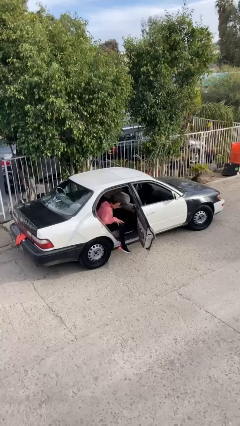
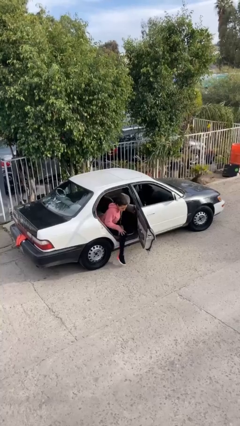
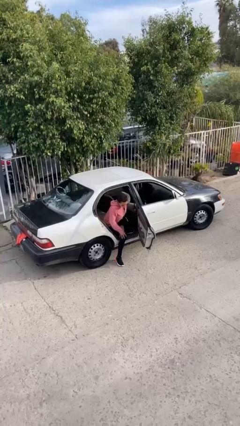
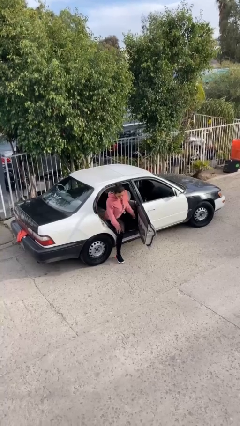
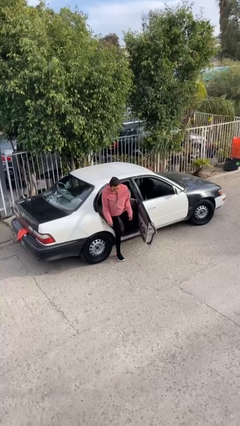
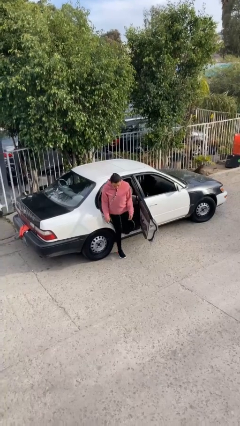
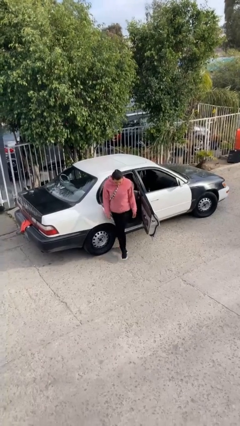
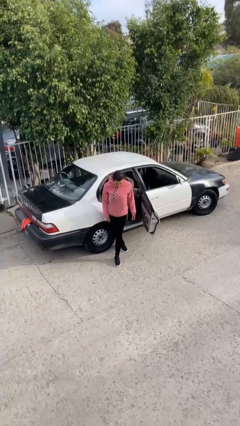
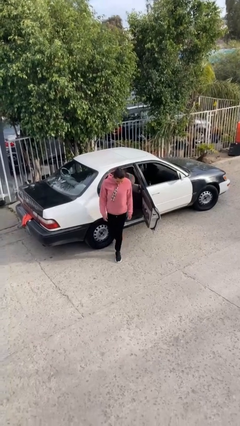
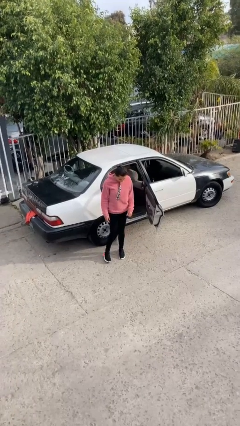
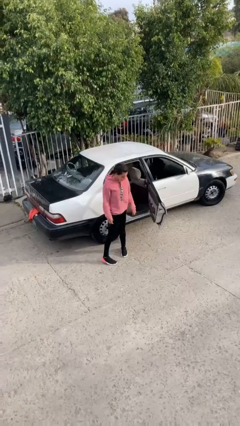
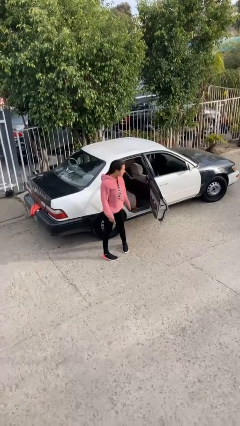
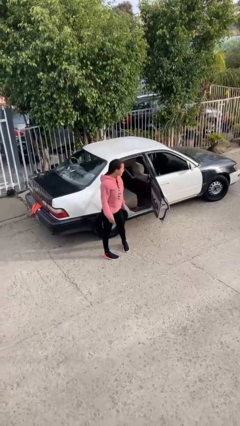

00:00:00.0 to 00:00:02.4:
person exits car

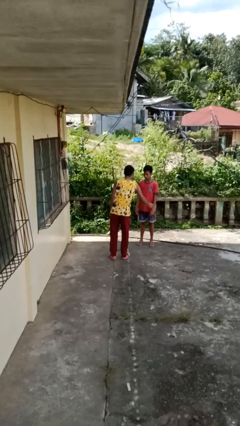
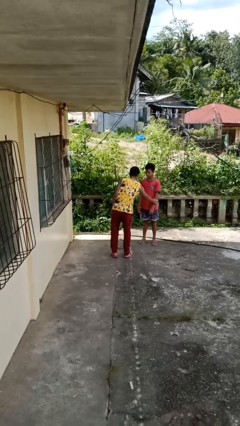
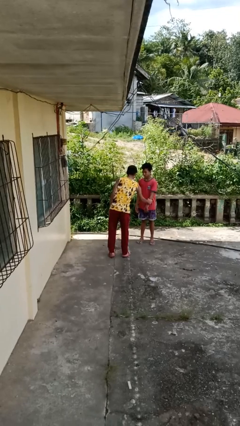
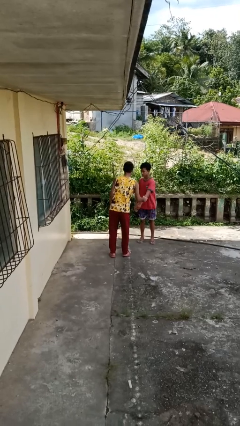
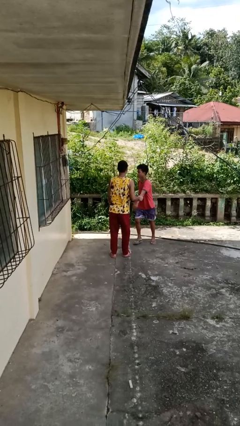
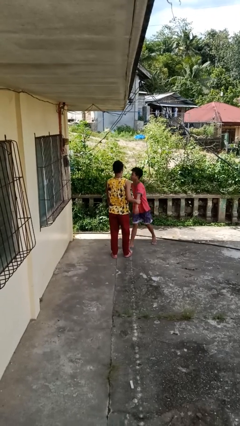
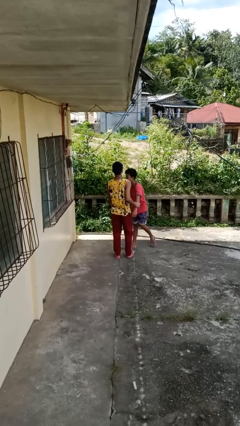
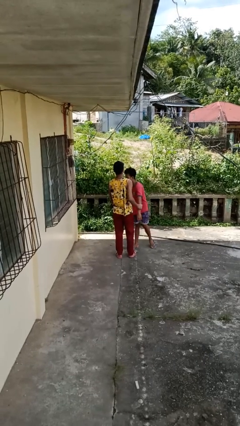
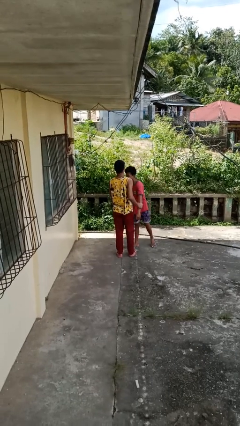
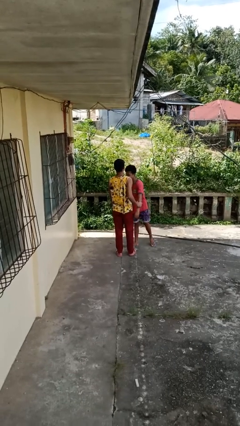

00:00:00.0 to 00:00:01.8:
person grabs person by forearm

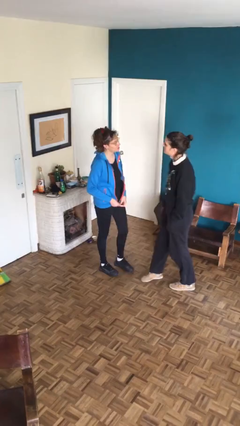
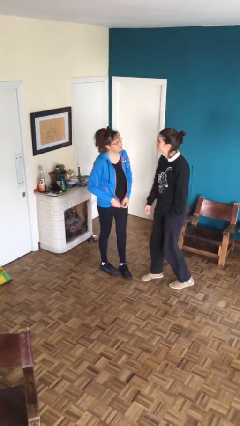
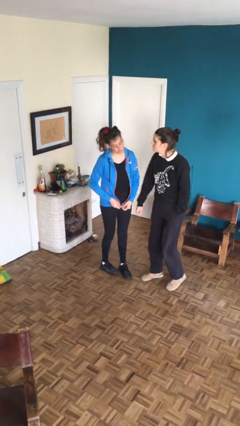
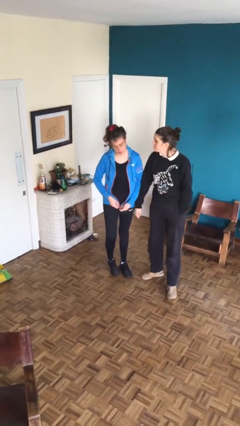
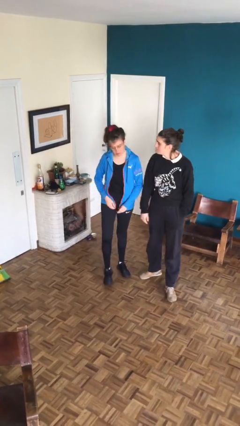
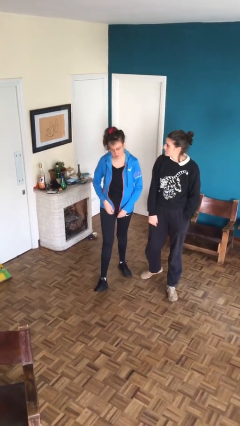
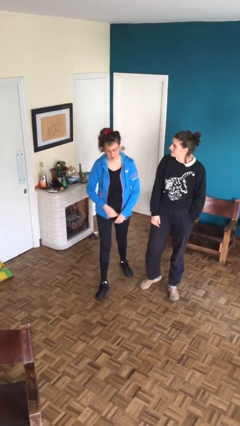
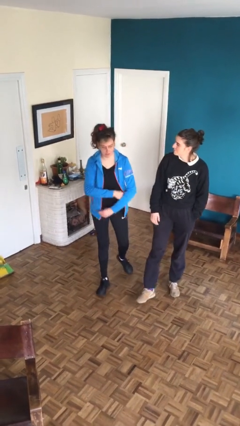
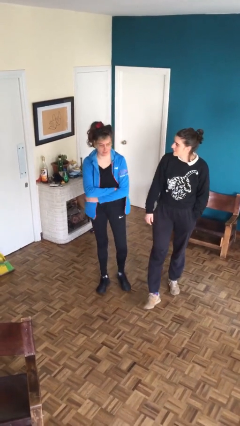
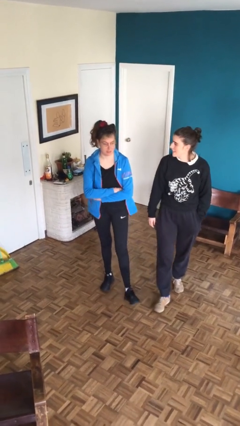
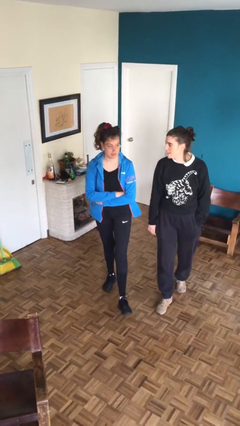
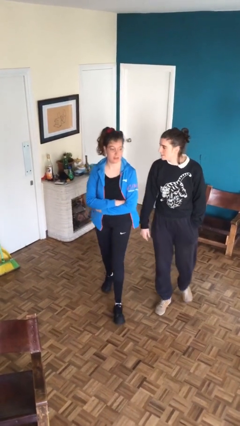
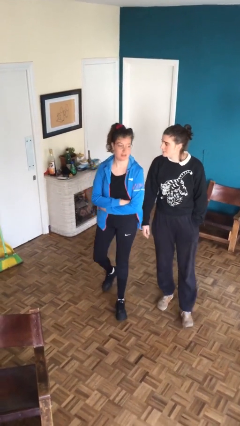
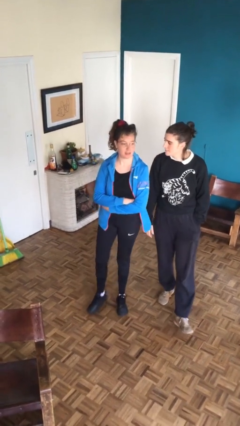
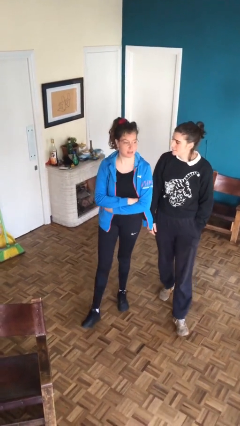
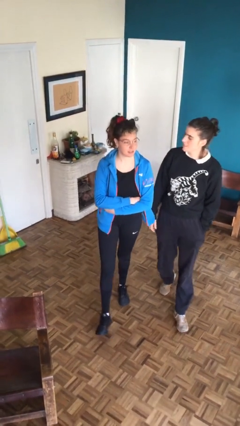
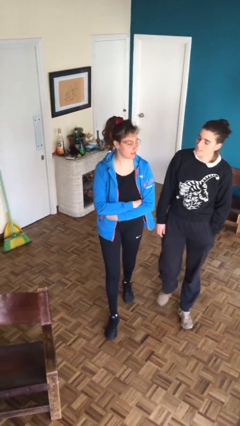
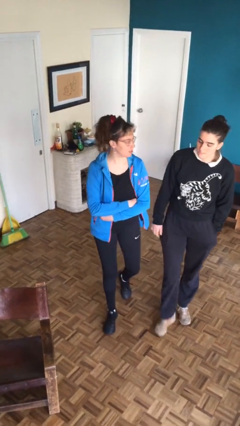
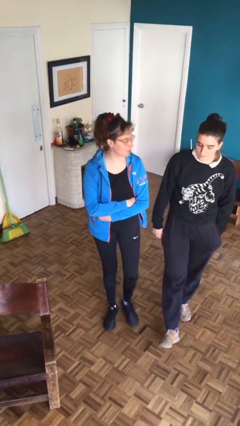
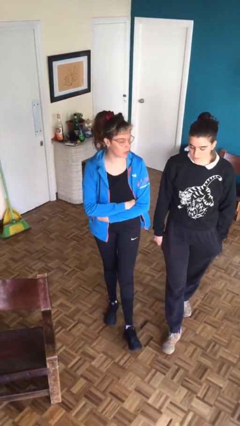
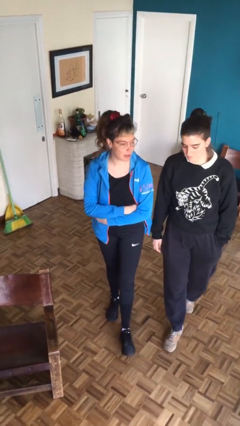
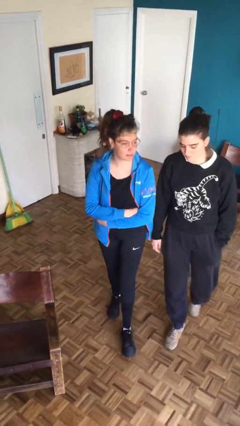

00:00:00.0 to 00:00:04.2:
person talks to person

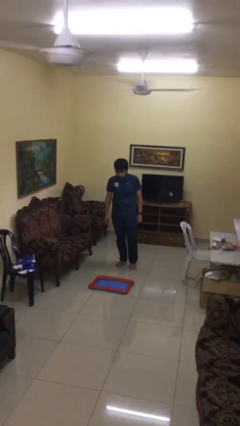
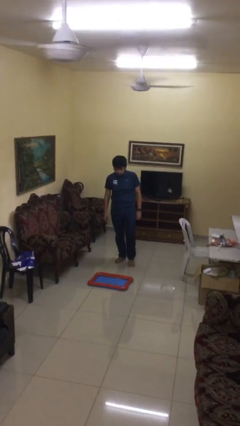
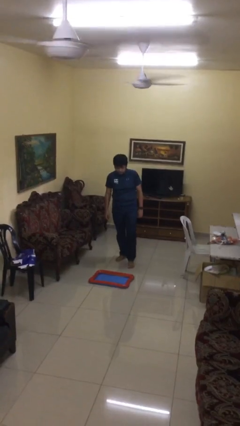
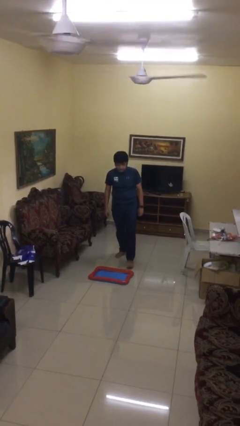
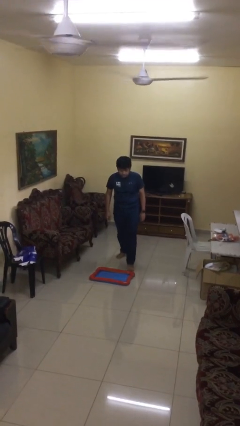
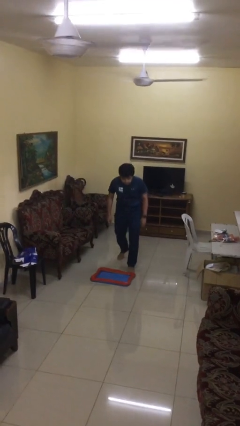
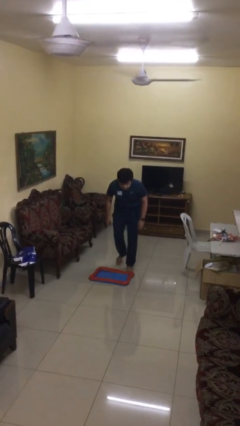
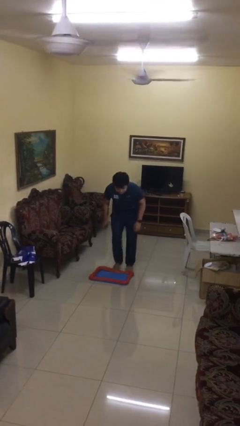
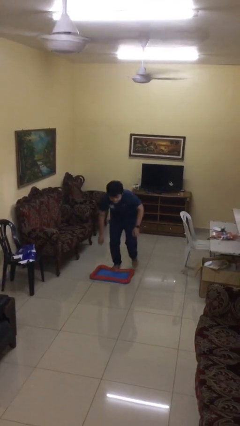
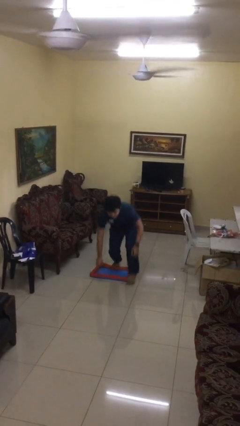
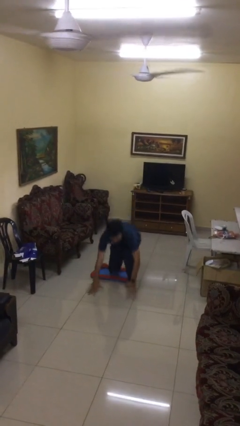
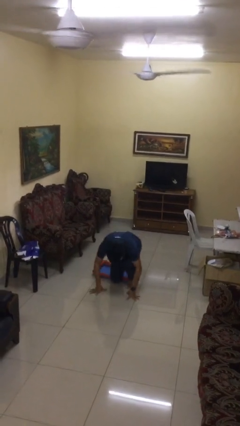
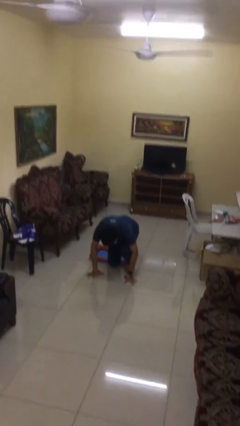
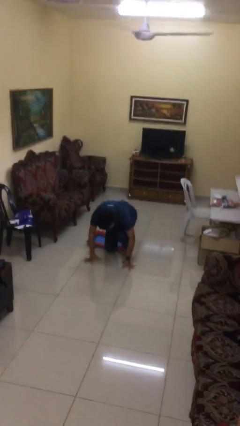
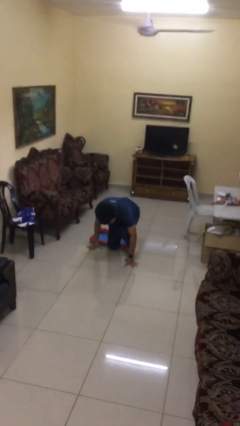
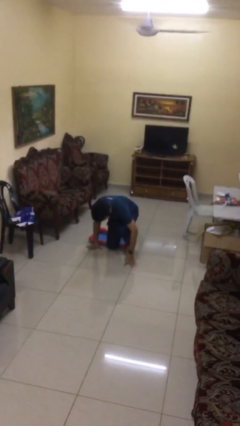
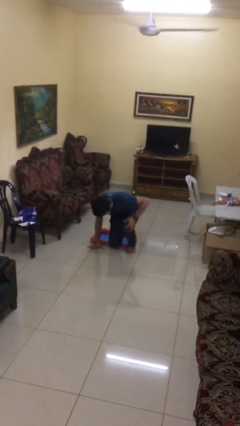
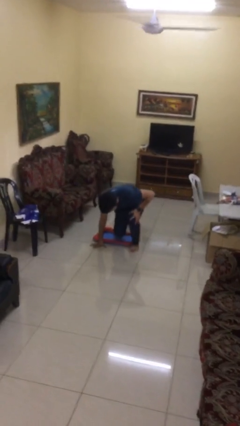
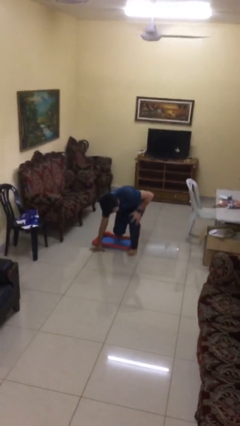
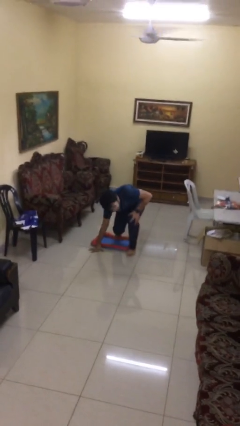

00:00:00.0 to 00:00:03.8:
person trips on object on floor

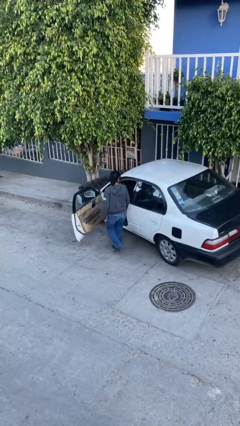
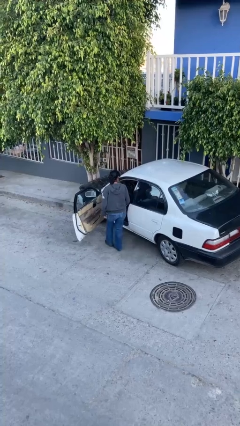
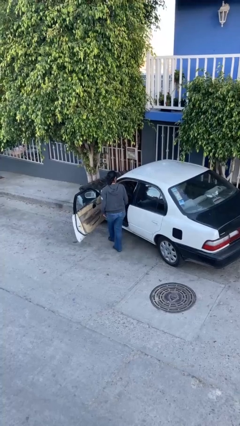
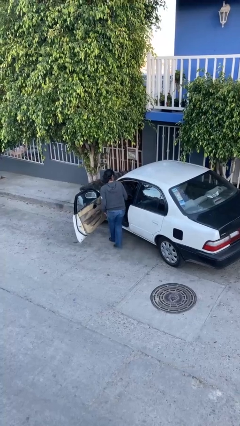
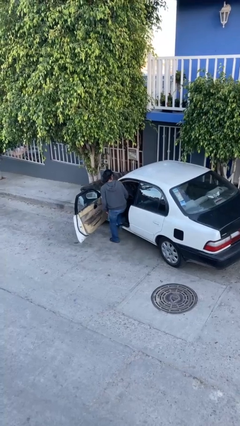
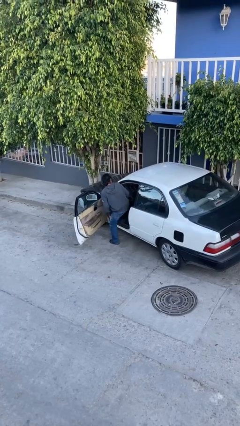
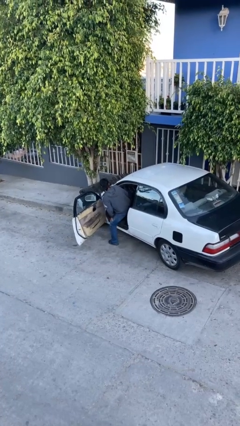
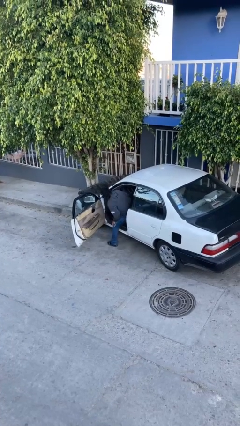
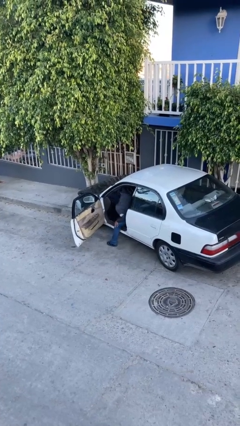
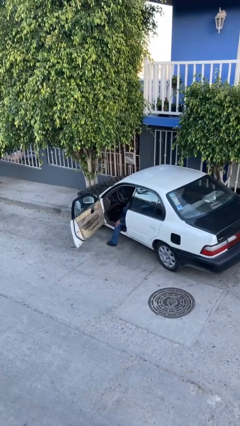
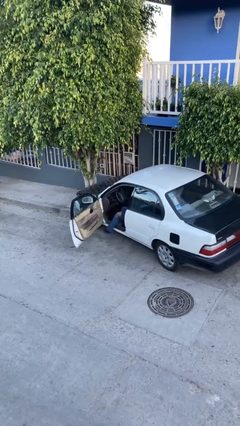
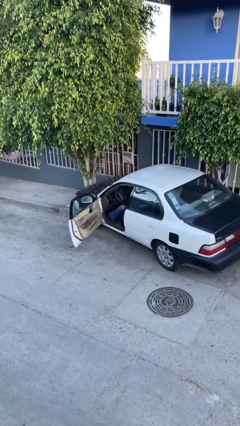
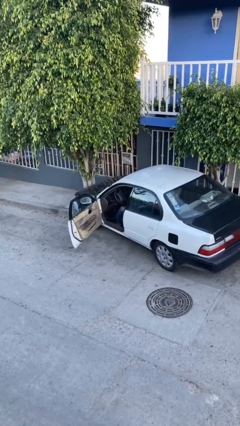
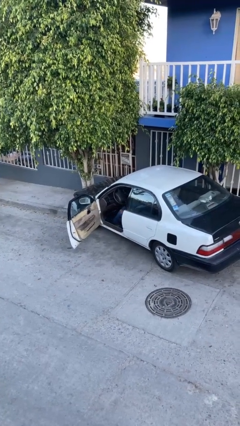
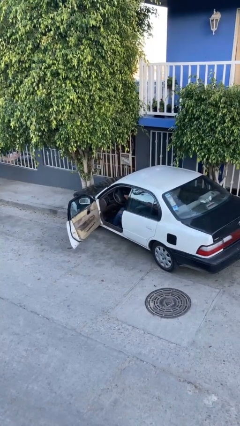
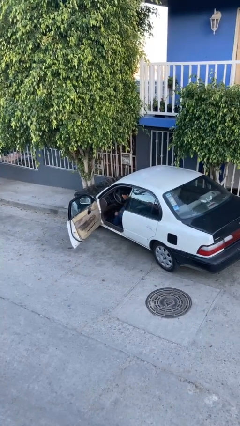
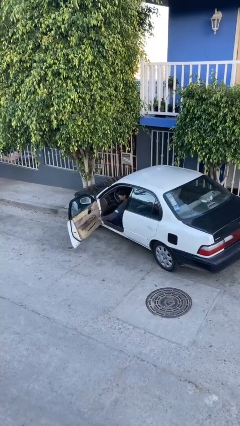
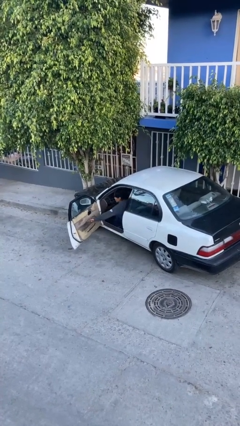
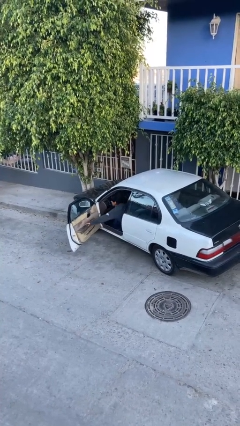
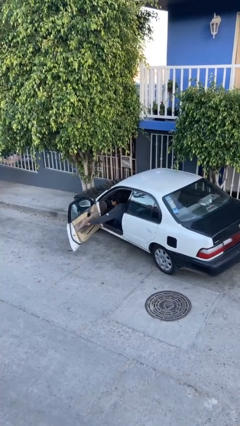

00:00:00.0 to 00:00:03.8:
person enters car

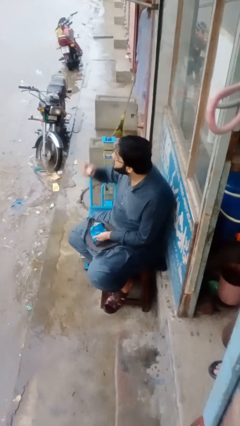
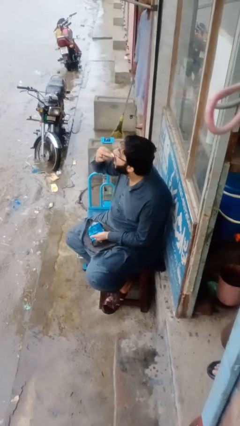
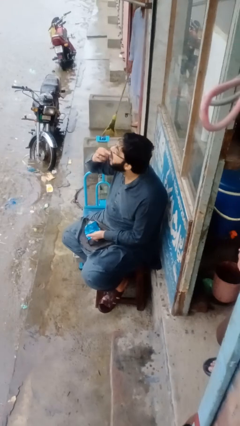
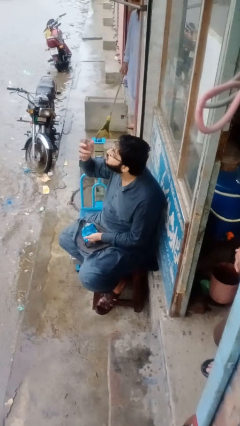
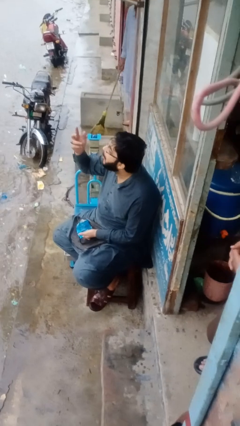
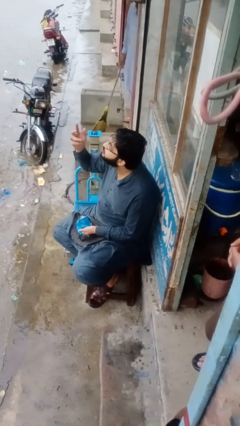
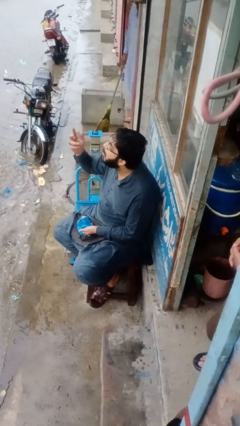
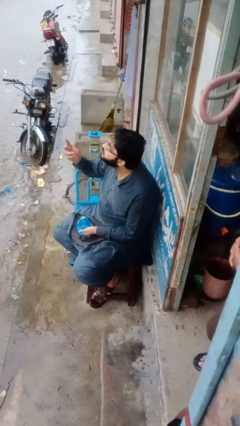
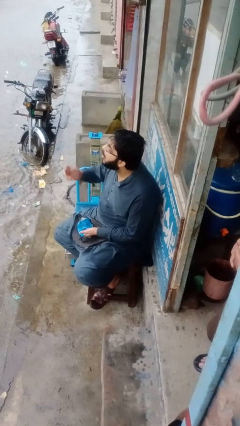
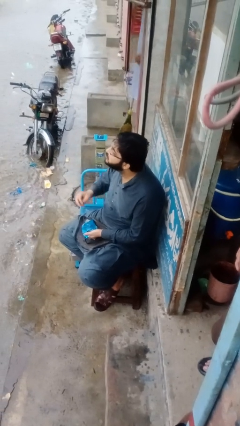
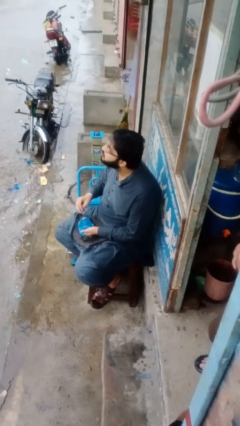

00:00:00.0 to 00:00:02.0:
person eats snack from bag
